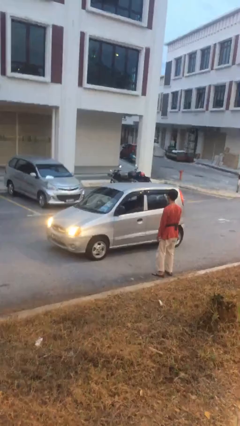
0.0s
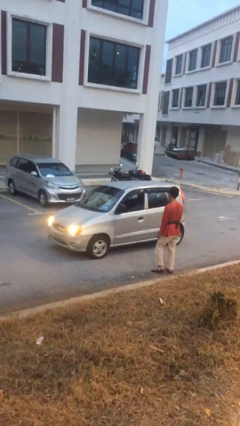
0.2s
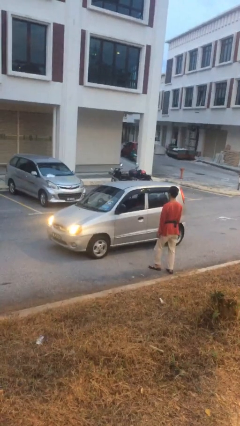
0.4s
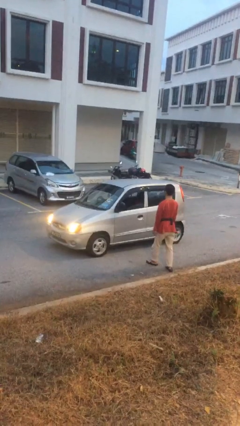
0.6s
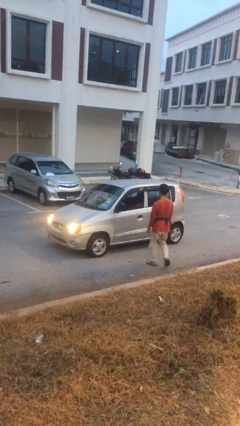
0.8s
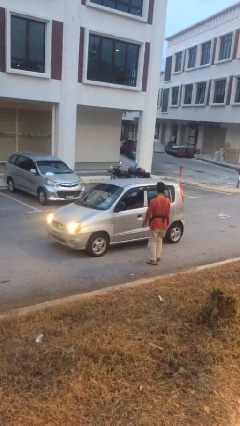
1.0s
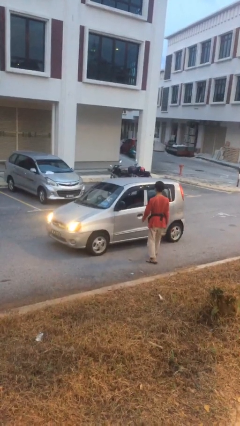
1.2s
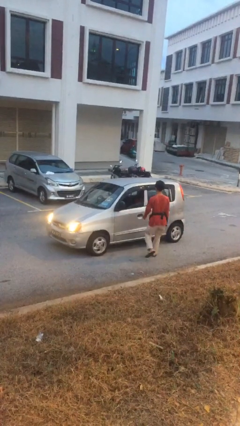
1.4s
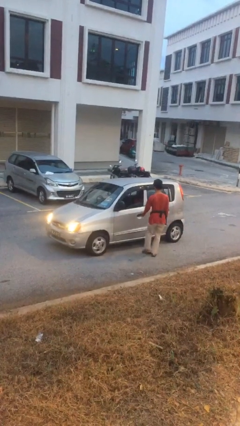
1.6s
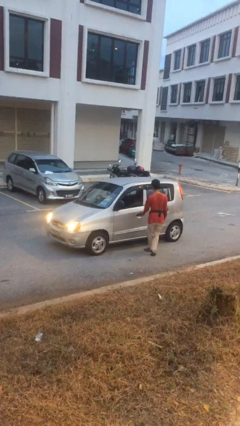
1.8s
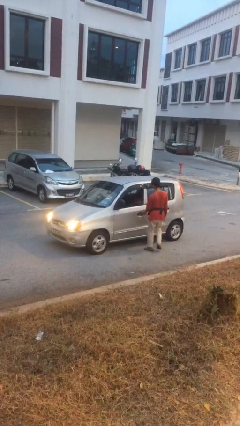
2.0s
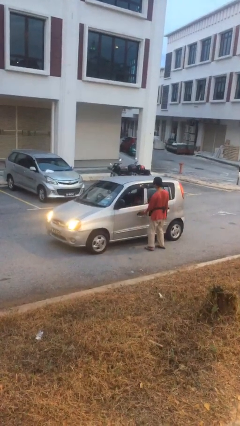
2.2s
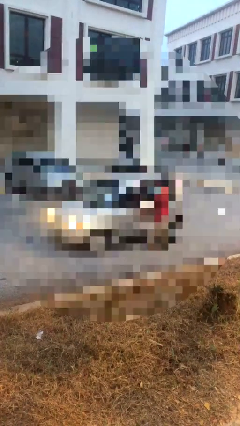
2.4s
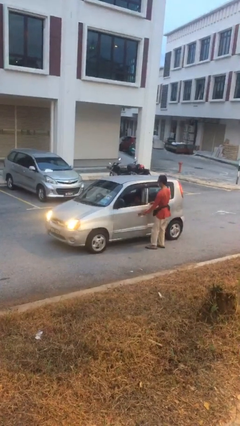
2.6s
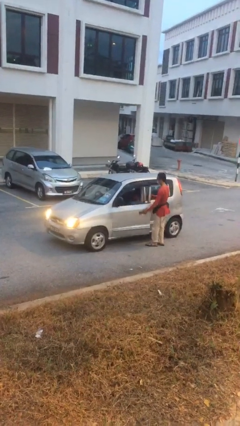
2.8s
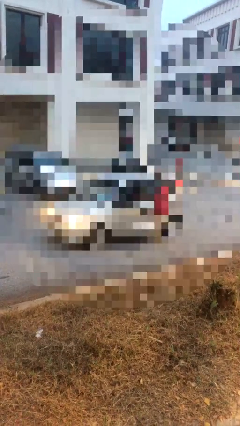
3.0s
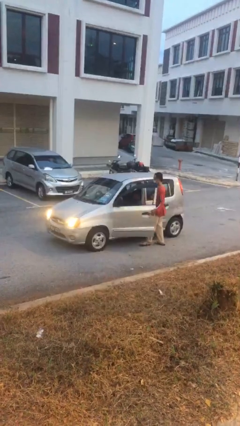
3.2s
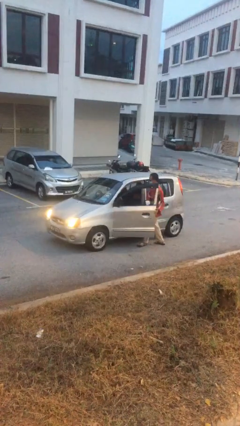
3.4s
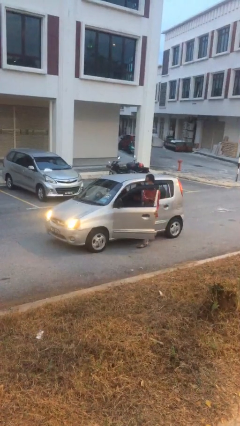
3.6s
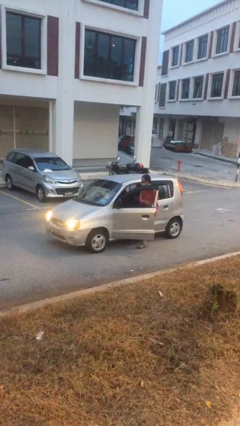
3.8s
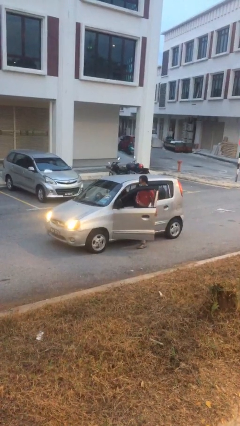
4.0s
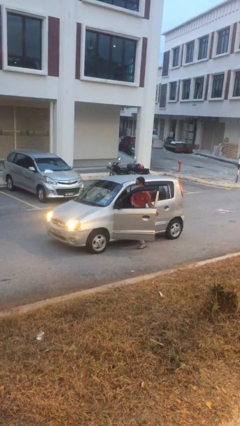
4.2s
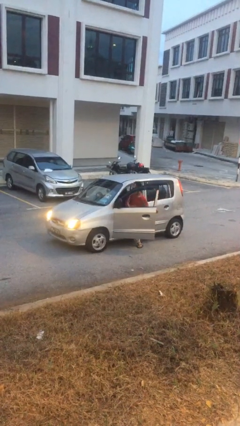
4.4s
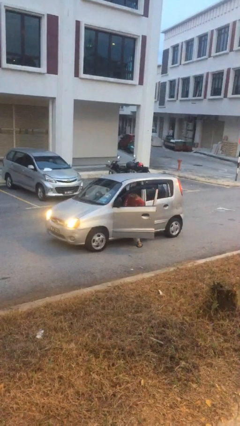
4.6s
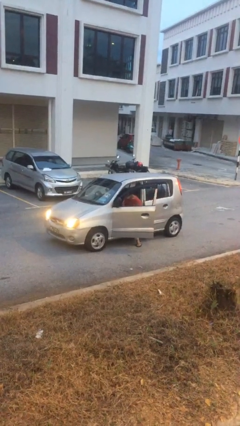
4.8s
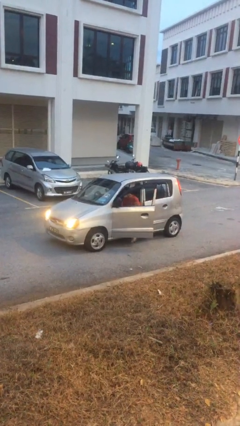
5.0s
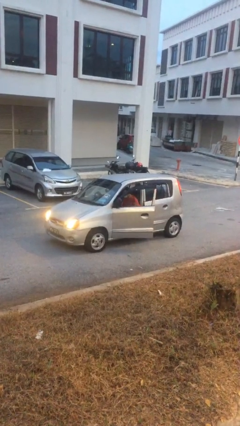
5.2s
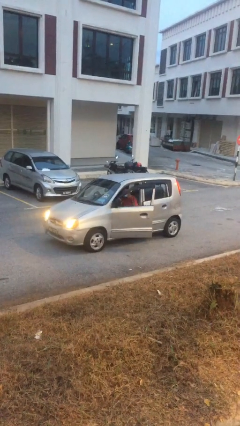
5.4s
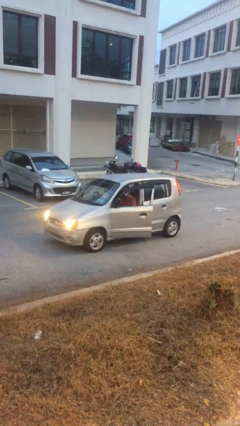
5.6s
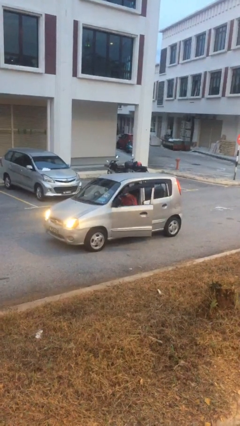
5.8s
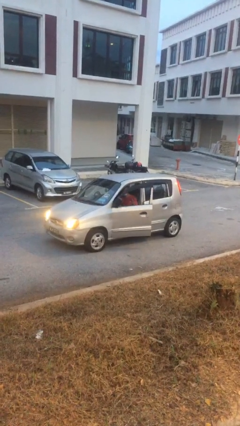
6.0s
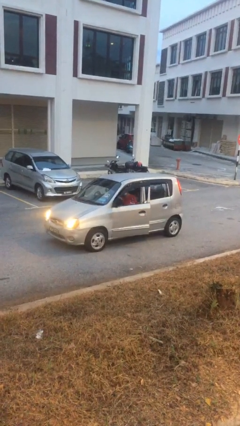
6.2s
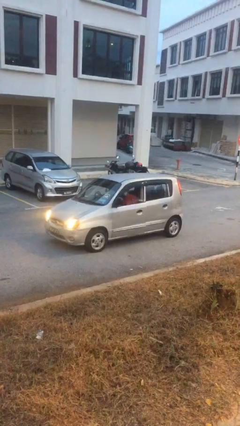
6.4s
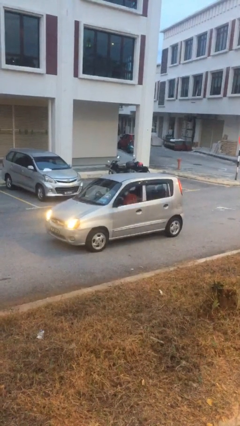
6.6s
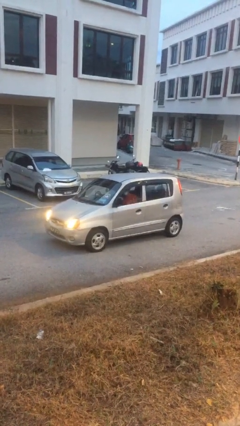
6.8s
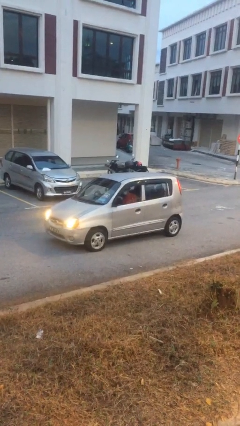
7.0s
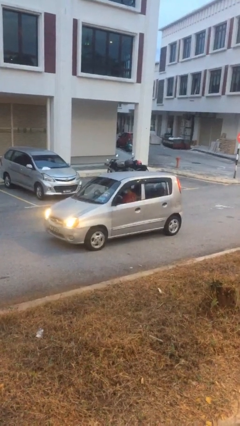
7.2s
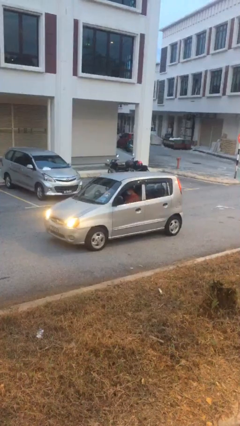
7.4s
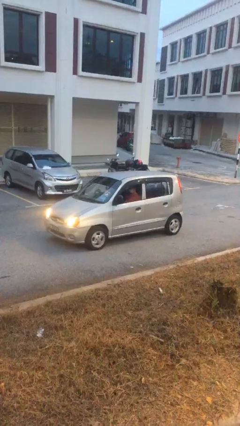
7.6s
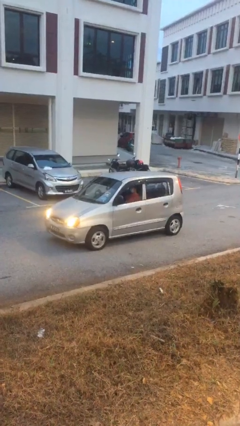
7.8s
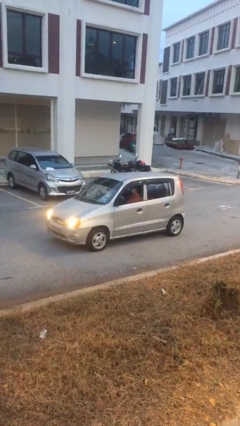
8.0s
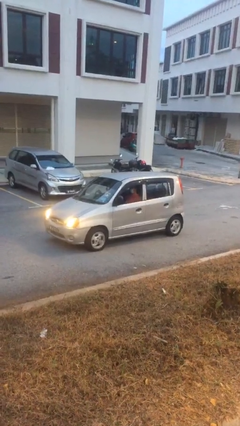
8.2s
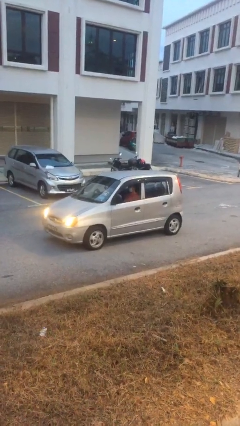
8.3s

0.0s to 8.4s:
car picks up person

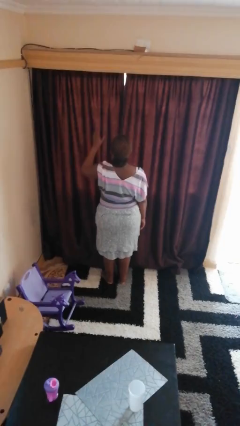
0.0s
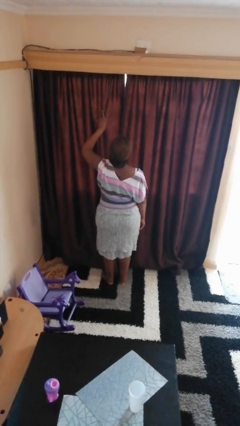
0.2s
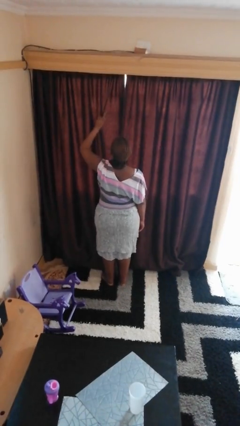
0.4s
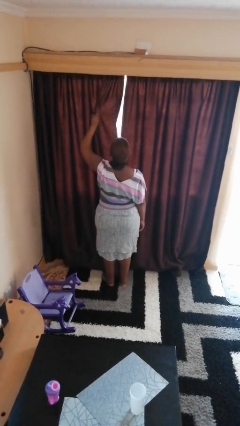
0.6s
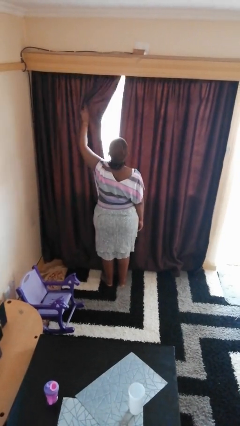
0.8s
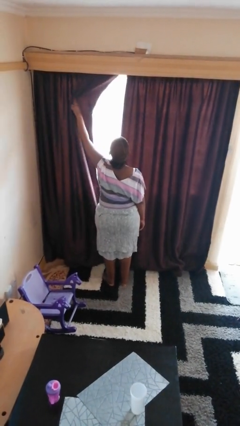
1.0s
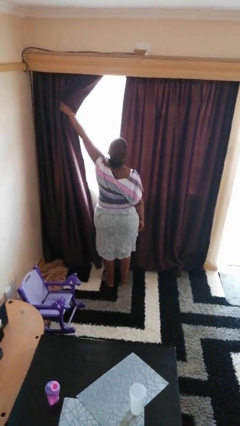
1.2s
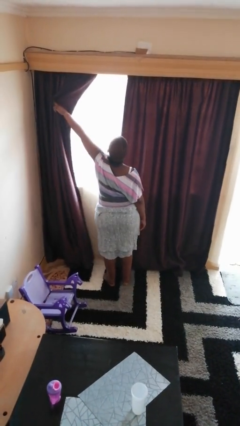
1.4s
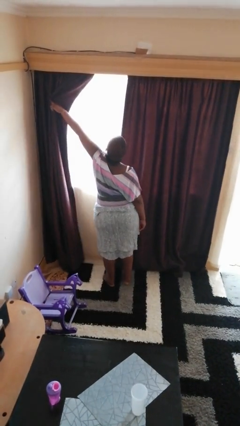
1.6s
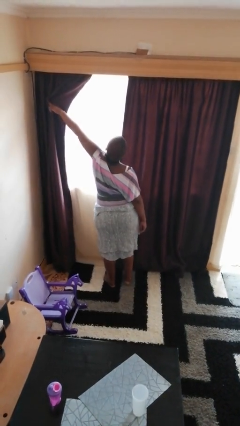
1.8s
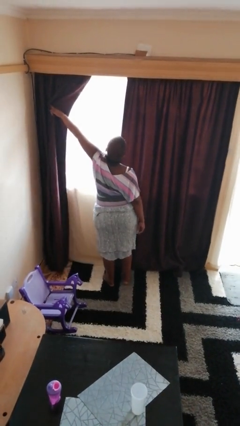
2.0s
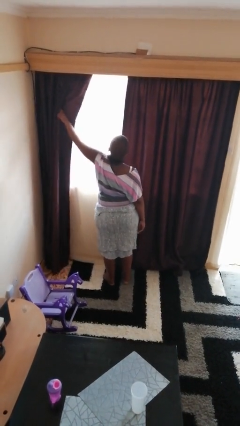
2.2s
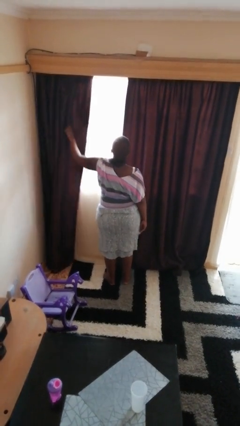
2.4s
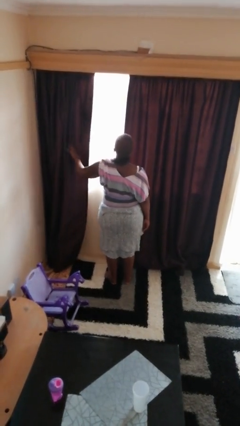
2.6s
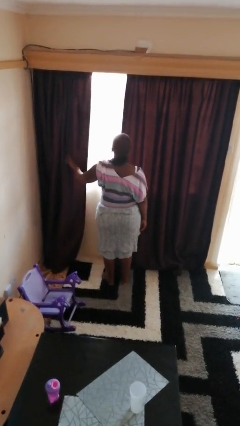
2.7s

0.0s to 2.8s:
person opens curtains

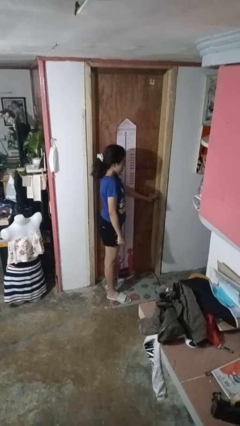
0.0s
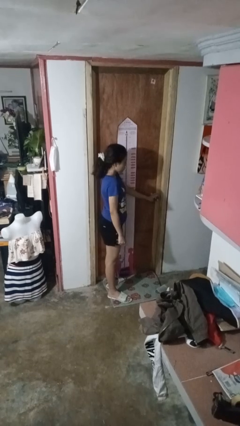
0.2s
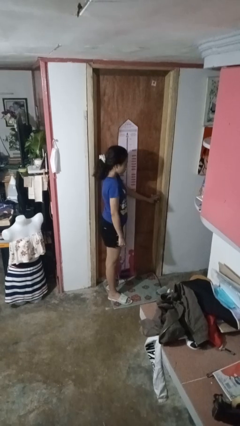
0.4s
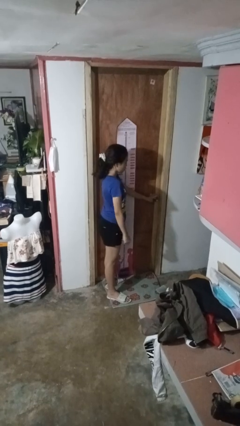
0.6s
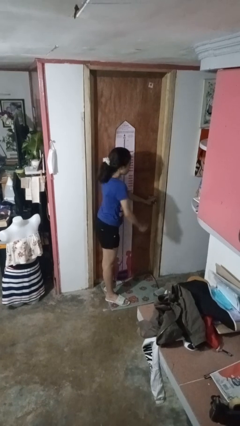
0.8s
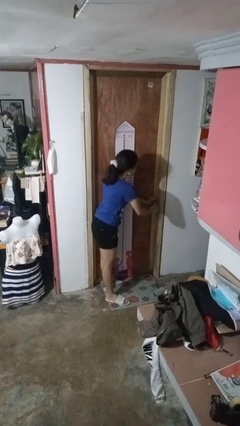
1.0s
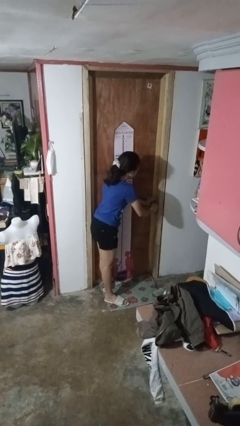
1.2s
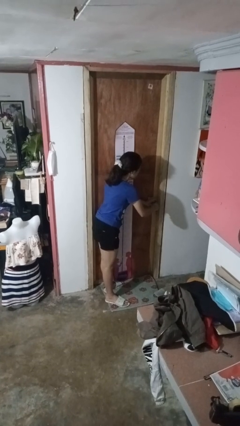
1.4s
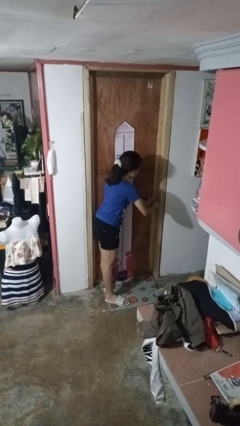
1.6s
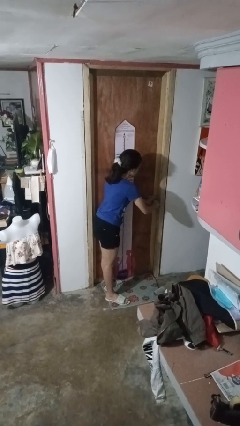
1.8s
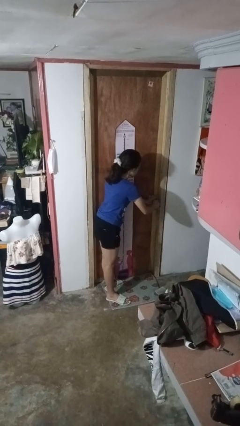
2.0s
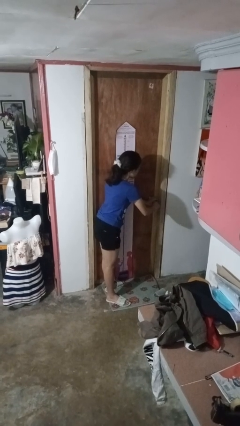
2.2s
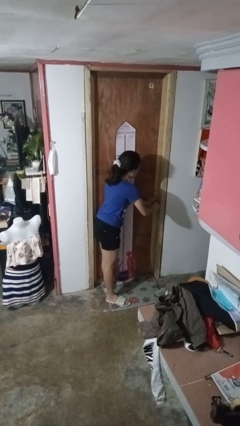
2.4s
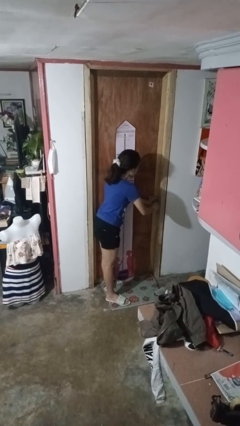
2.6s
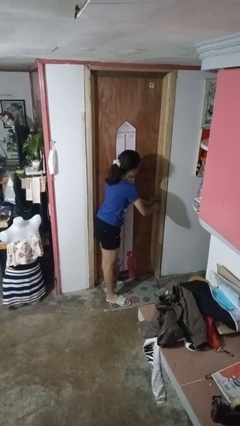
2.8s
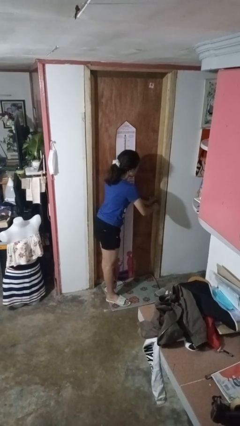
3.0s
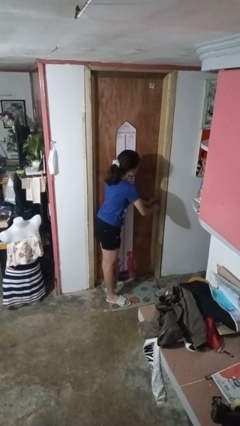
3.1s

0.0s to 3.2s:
person unlocks door with keys

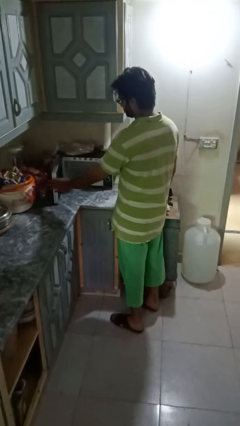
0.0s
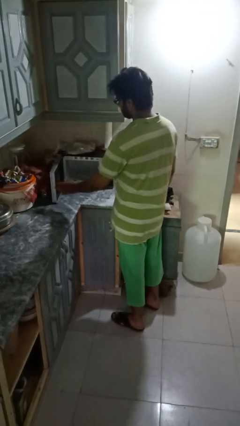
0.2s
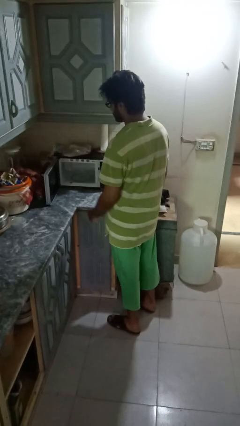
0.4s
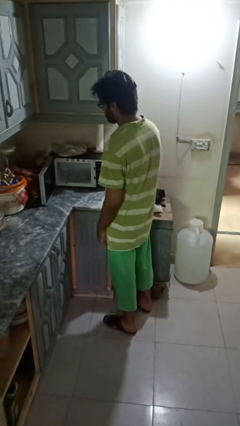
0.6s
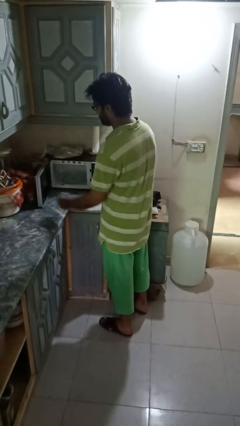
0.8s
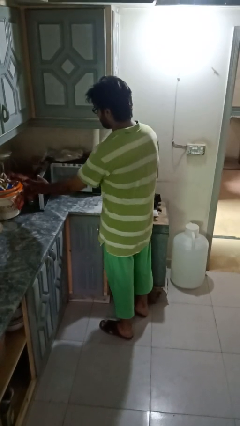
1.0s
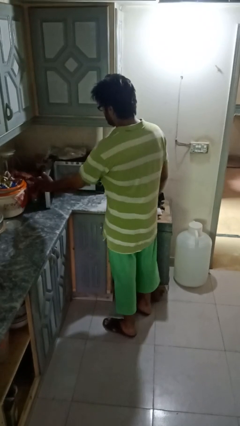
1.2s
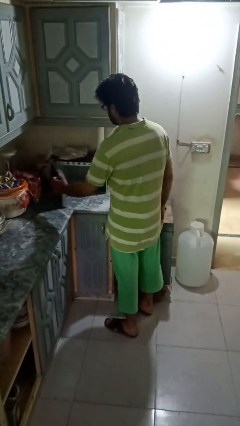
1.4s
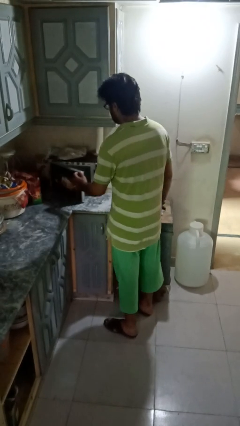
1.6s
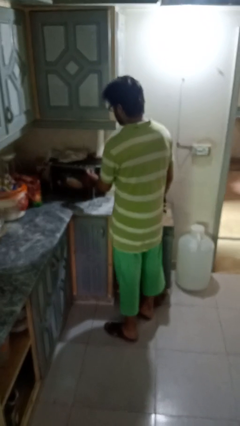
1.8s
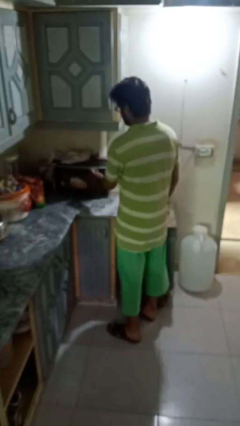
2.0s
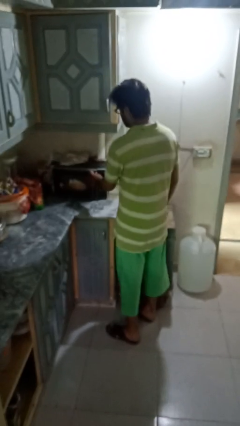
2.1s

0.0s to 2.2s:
person closes microwave

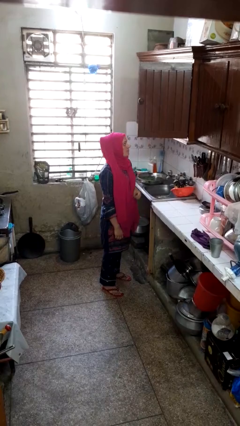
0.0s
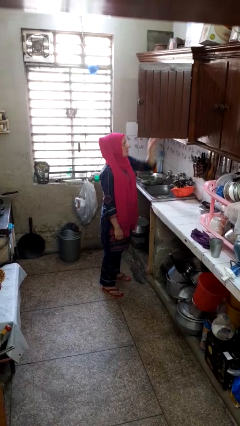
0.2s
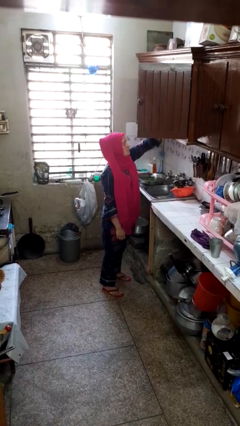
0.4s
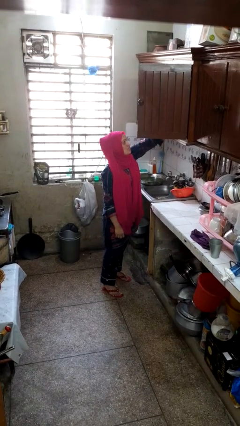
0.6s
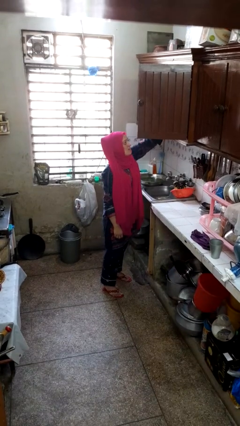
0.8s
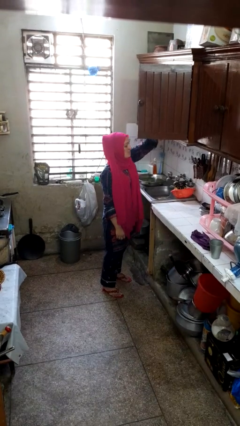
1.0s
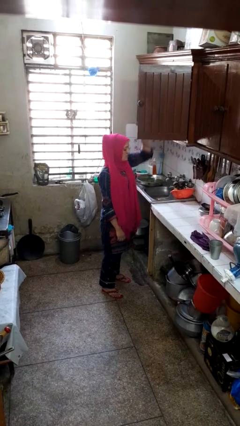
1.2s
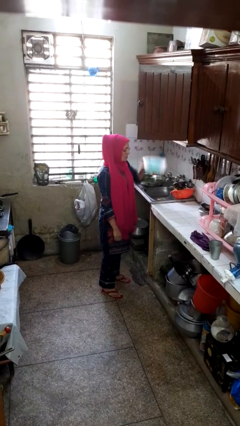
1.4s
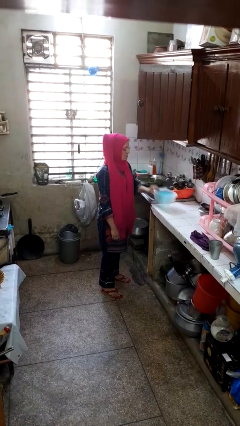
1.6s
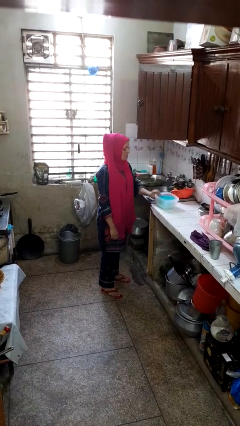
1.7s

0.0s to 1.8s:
person takes object from cabinet
